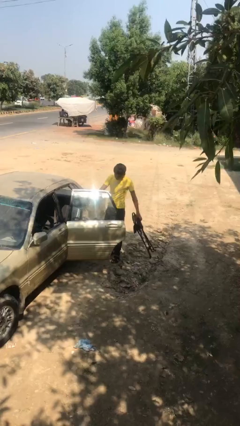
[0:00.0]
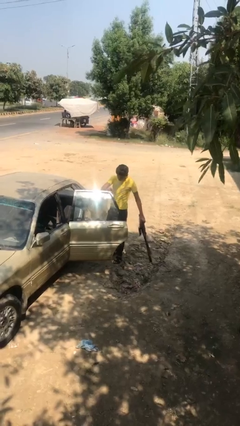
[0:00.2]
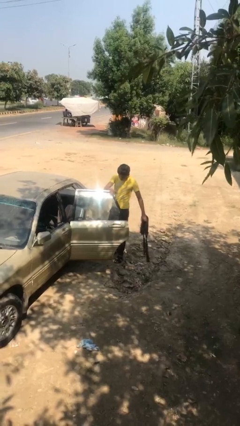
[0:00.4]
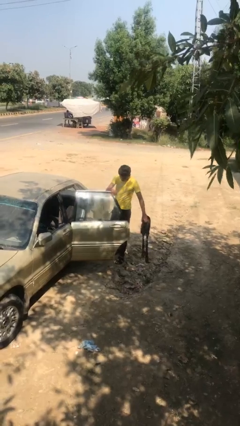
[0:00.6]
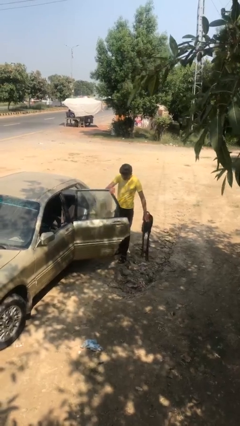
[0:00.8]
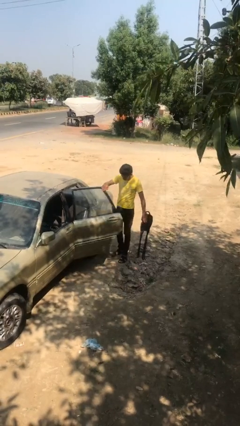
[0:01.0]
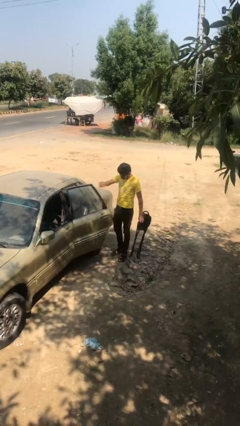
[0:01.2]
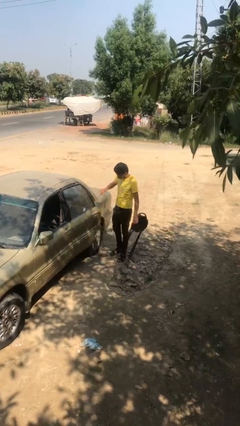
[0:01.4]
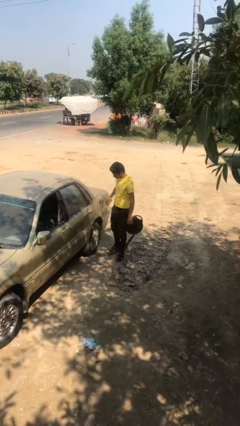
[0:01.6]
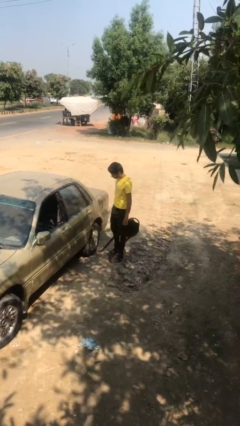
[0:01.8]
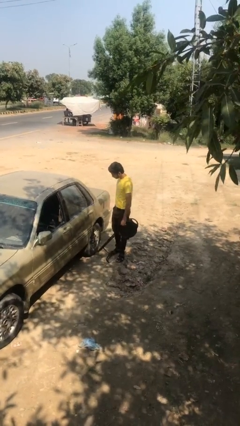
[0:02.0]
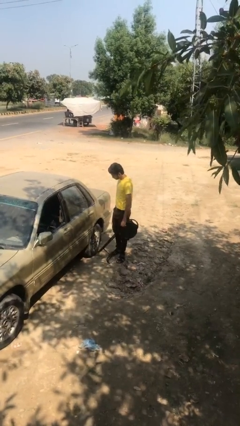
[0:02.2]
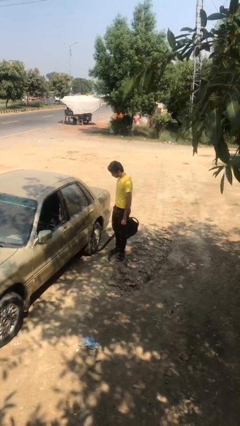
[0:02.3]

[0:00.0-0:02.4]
person closes car door

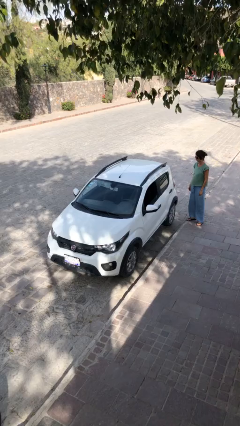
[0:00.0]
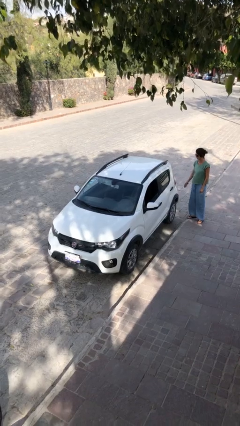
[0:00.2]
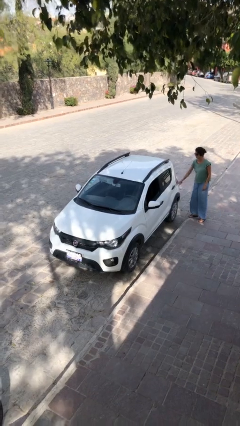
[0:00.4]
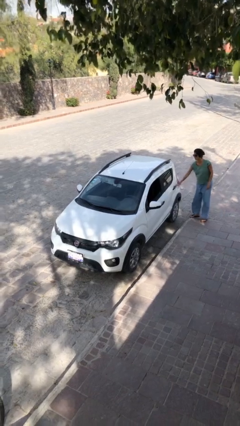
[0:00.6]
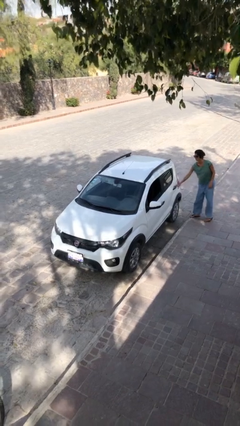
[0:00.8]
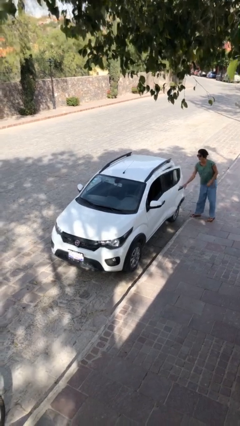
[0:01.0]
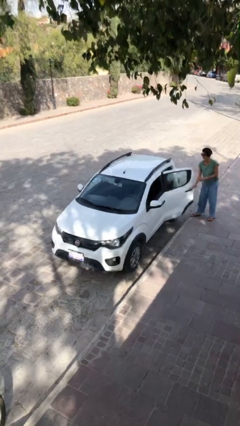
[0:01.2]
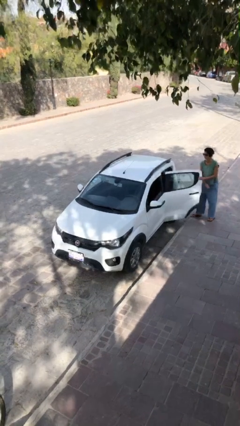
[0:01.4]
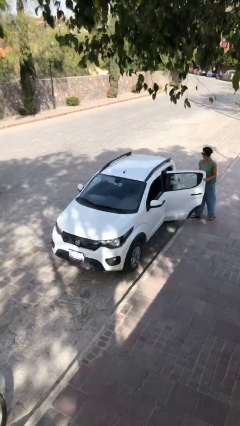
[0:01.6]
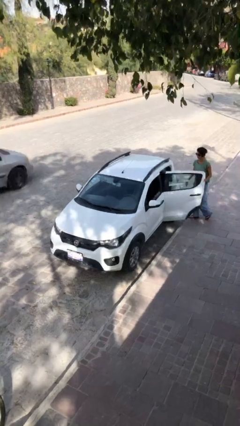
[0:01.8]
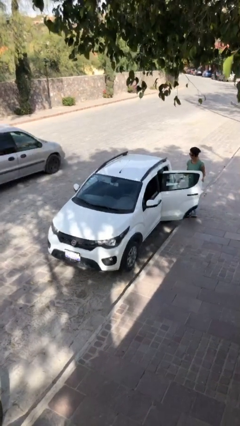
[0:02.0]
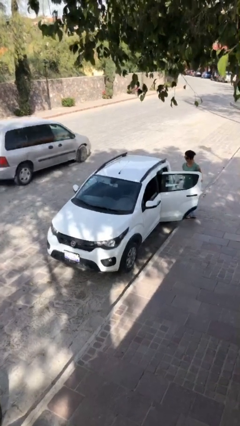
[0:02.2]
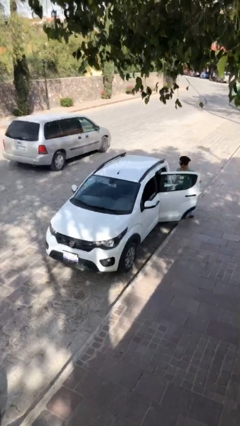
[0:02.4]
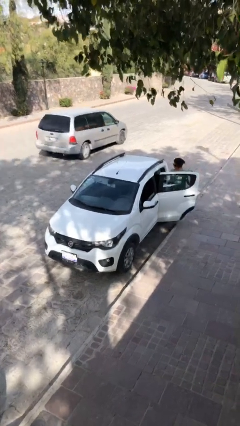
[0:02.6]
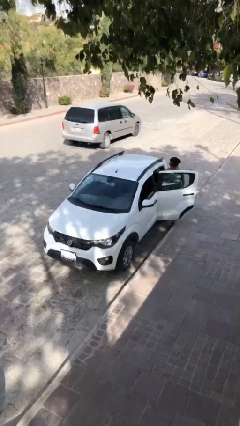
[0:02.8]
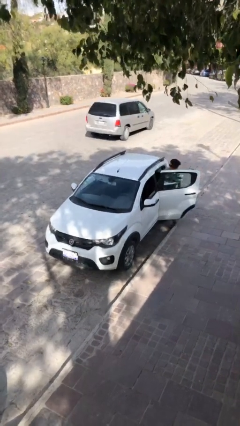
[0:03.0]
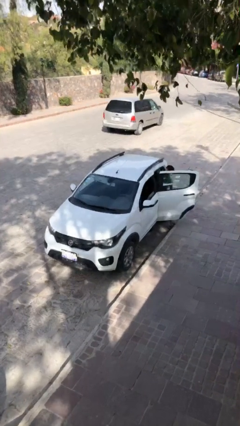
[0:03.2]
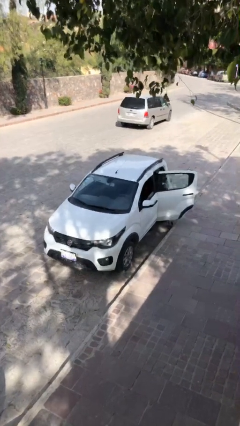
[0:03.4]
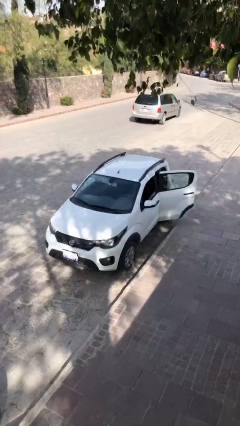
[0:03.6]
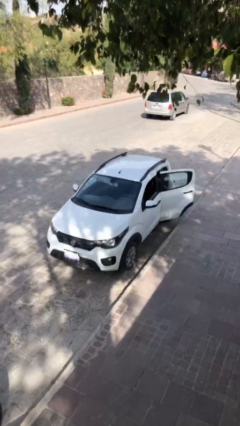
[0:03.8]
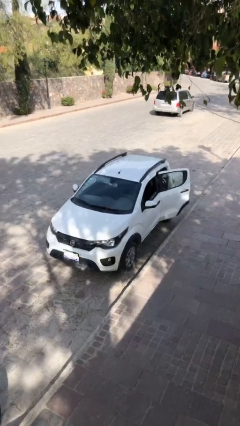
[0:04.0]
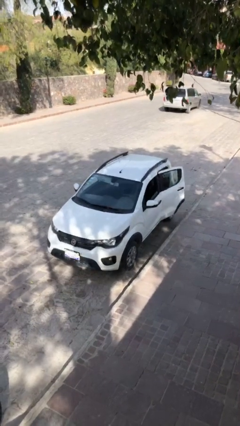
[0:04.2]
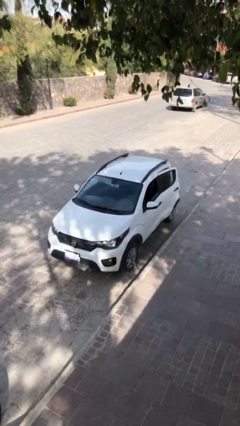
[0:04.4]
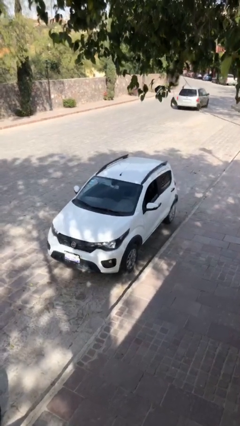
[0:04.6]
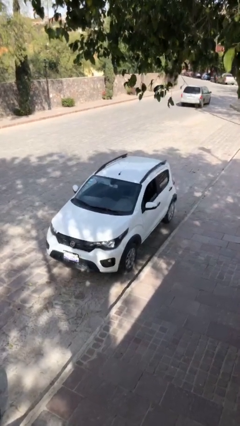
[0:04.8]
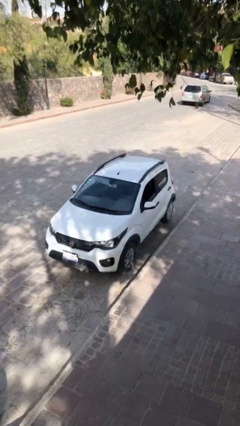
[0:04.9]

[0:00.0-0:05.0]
car picks up person

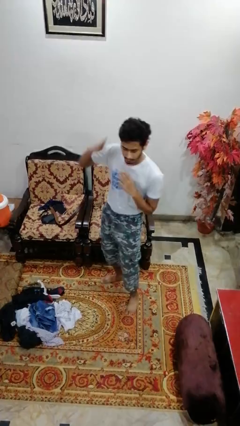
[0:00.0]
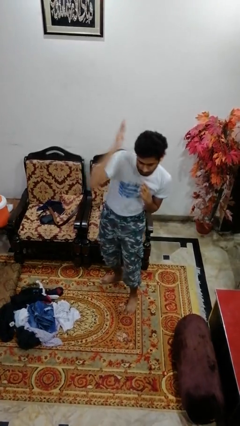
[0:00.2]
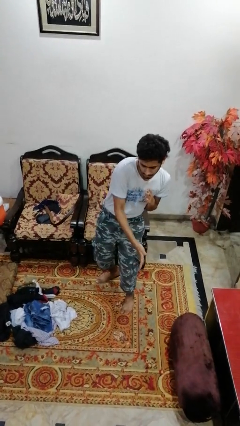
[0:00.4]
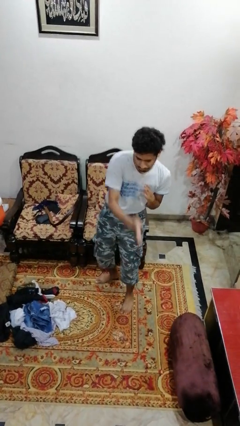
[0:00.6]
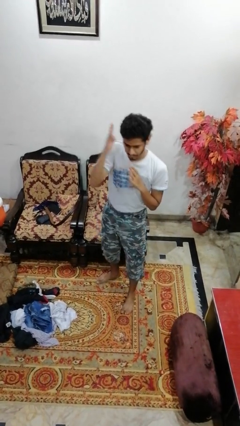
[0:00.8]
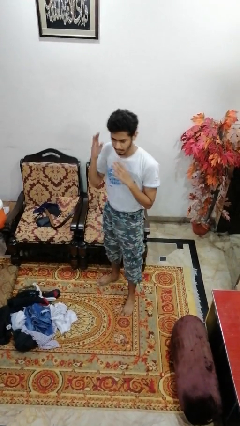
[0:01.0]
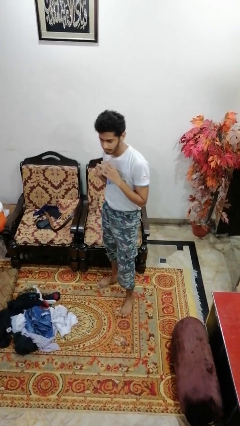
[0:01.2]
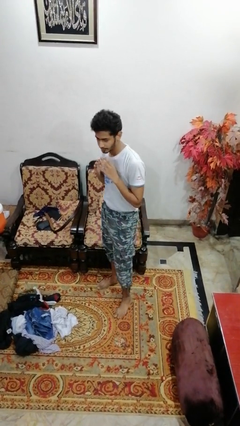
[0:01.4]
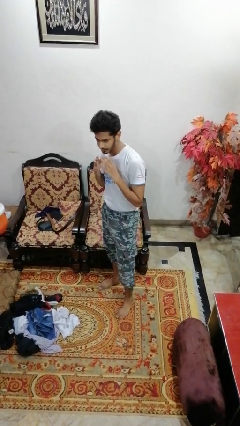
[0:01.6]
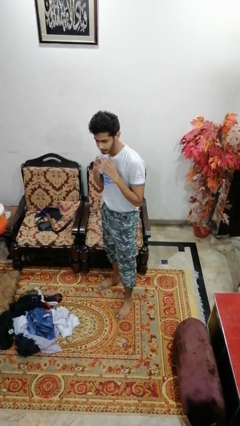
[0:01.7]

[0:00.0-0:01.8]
person karate chop

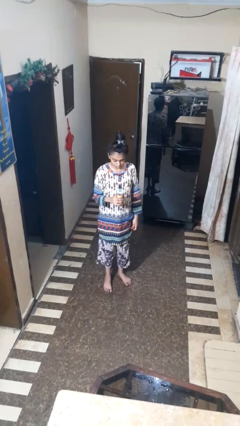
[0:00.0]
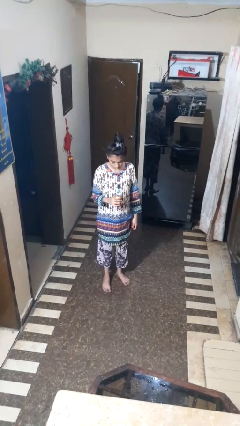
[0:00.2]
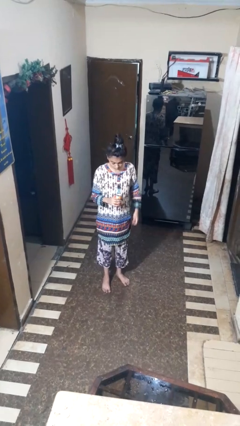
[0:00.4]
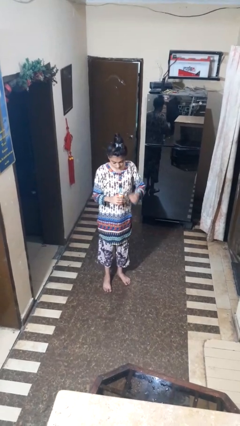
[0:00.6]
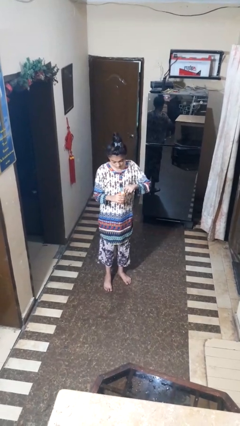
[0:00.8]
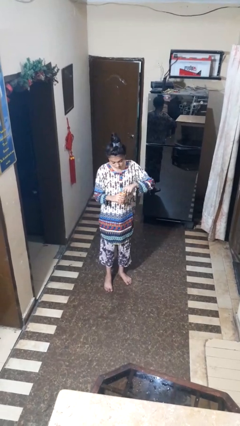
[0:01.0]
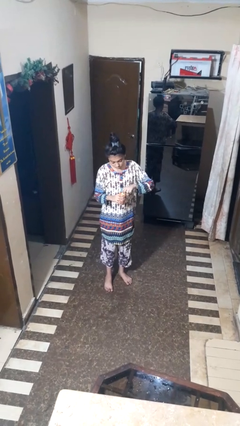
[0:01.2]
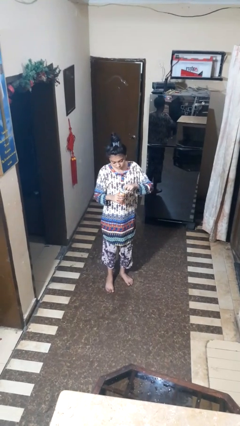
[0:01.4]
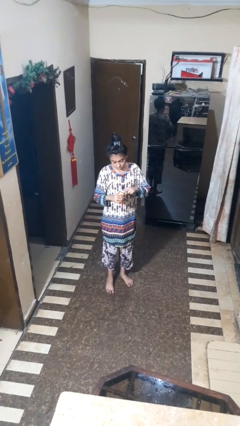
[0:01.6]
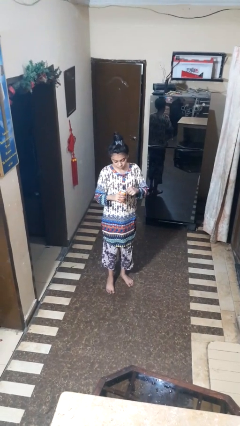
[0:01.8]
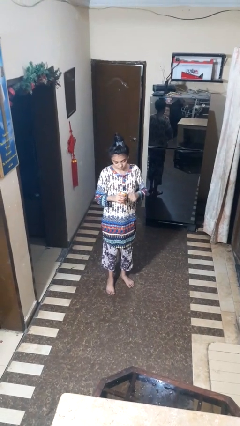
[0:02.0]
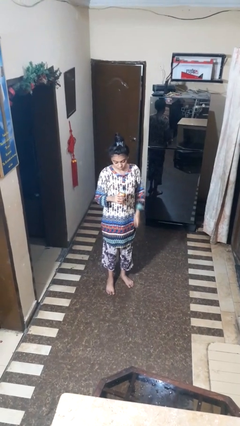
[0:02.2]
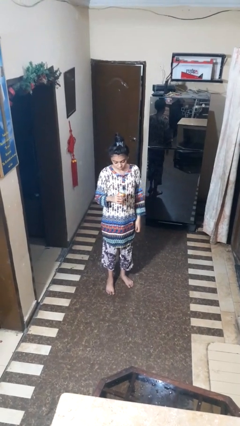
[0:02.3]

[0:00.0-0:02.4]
person opens beverage can

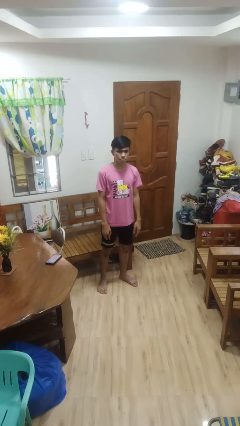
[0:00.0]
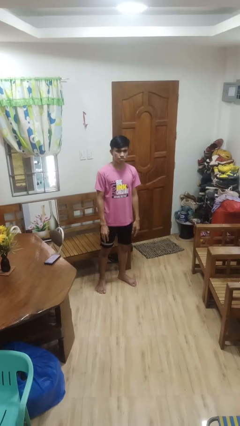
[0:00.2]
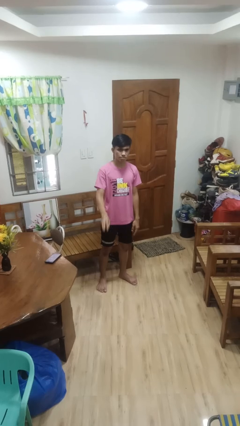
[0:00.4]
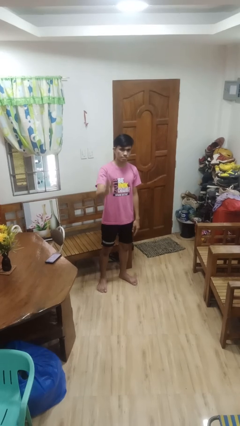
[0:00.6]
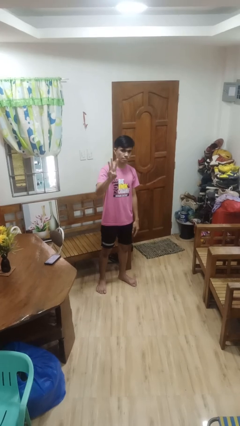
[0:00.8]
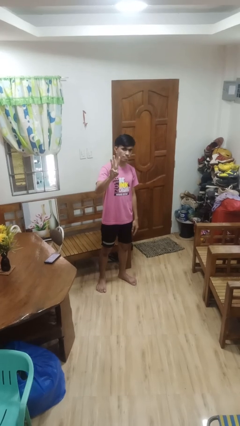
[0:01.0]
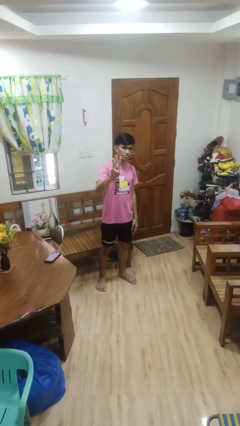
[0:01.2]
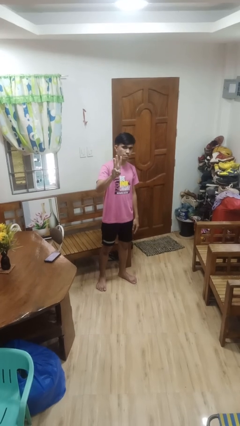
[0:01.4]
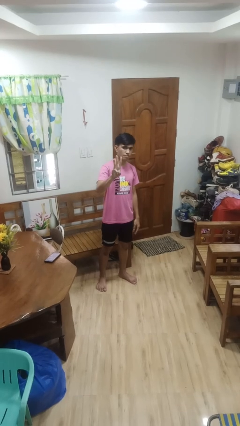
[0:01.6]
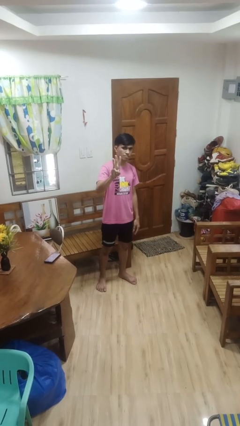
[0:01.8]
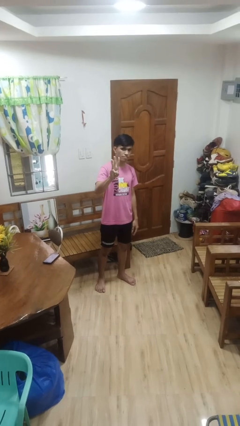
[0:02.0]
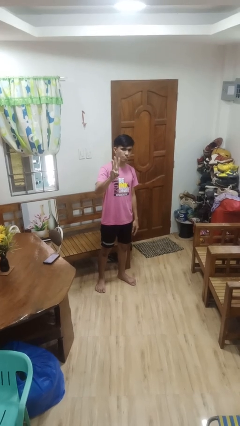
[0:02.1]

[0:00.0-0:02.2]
person gestures number three

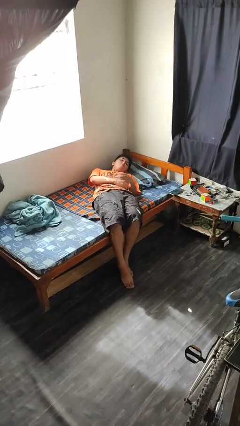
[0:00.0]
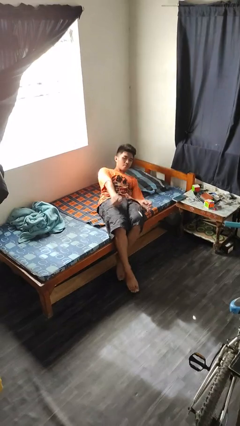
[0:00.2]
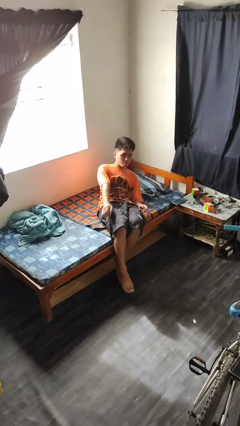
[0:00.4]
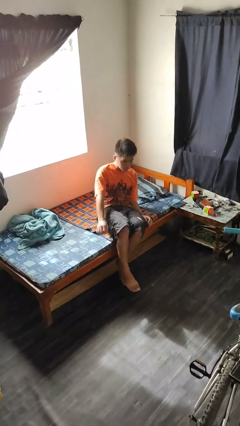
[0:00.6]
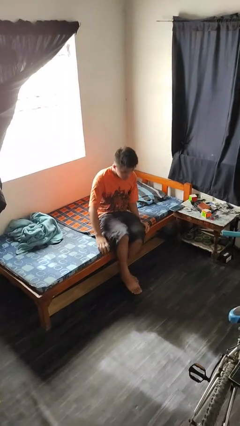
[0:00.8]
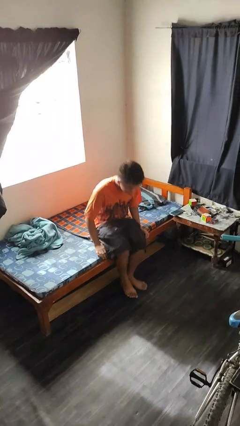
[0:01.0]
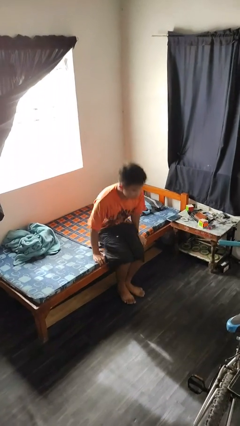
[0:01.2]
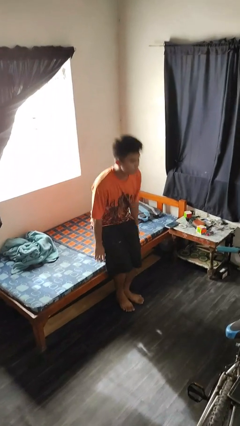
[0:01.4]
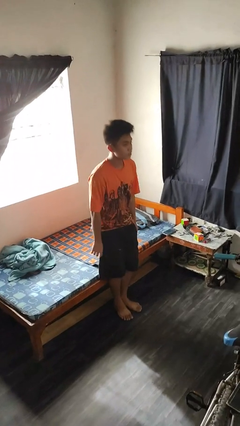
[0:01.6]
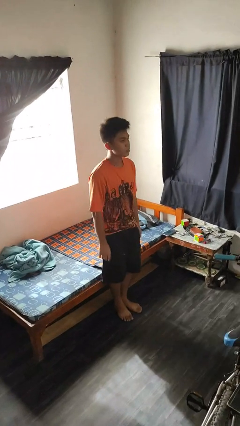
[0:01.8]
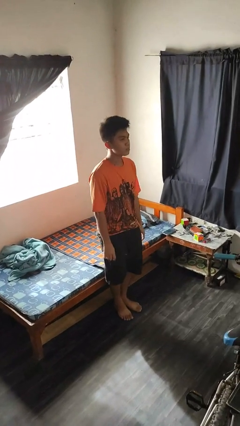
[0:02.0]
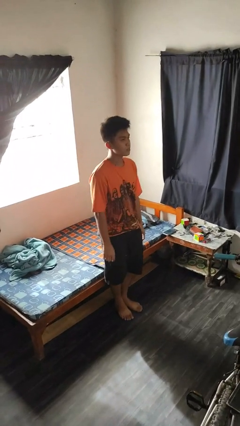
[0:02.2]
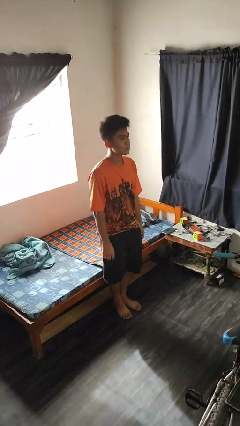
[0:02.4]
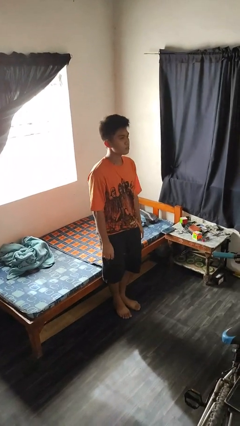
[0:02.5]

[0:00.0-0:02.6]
person stands up

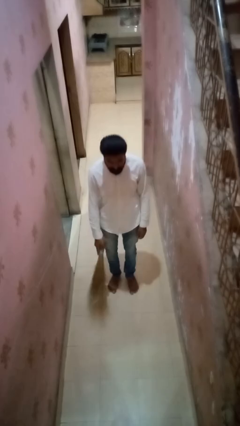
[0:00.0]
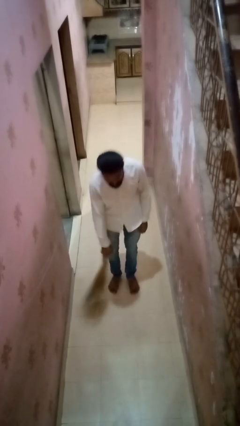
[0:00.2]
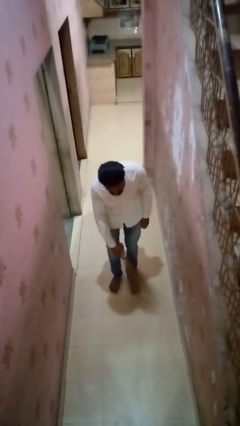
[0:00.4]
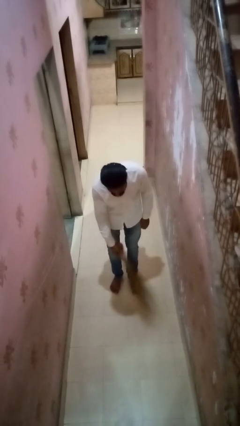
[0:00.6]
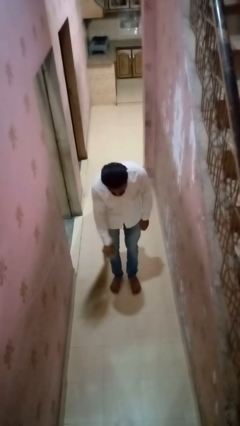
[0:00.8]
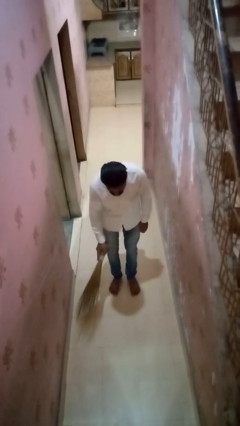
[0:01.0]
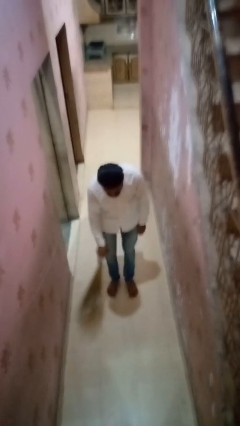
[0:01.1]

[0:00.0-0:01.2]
person sweeps floor
